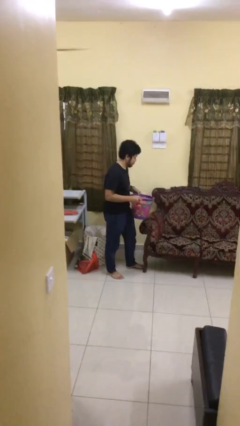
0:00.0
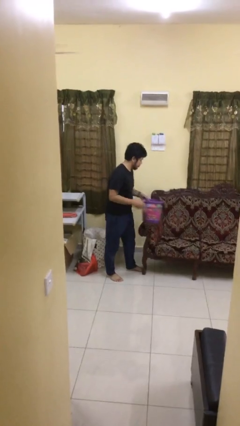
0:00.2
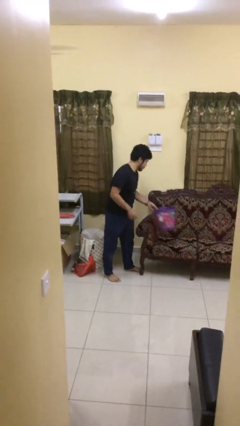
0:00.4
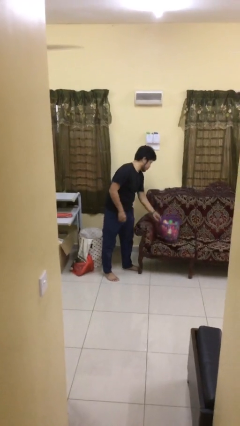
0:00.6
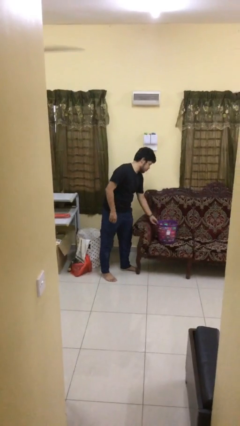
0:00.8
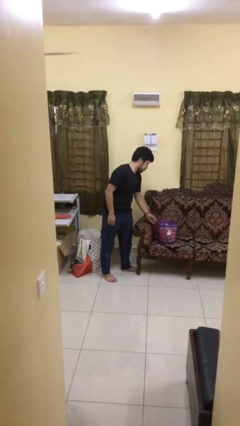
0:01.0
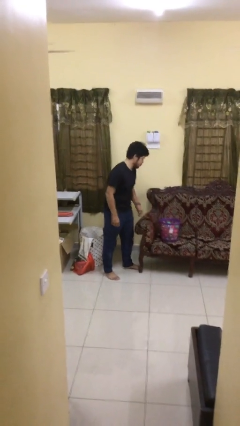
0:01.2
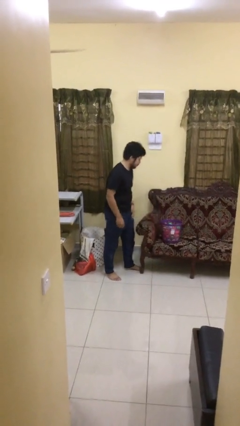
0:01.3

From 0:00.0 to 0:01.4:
person puts down object on couch

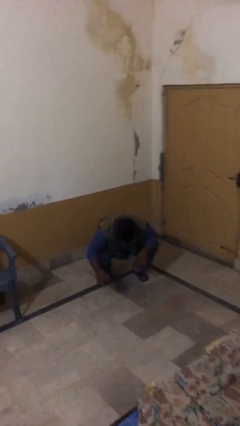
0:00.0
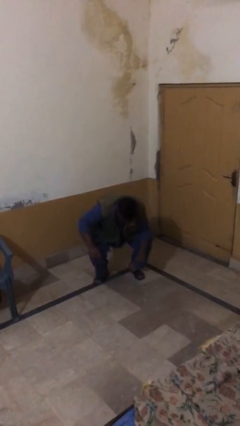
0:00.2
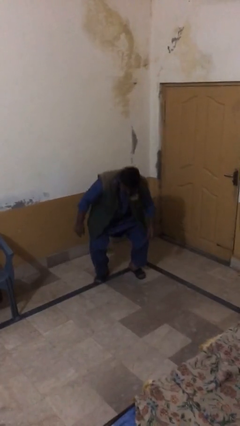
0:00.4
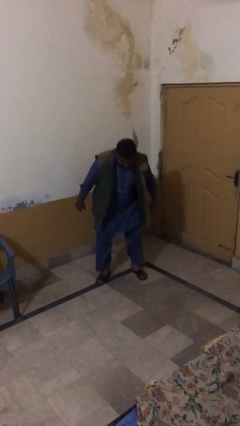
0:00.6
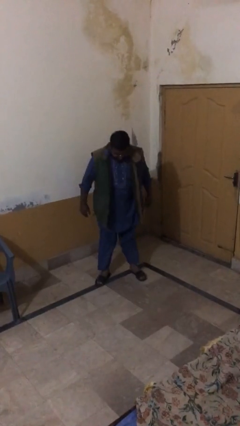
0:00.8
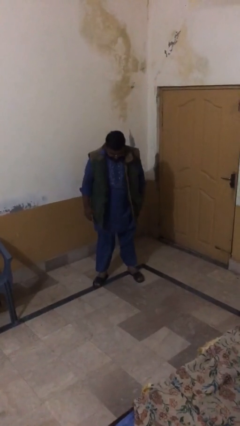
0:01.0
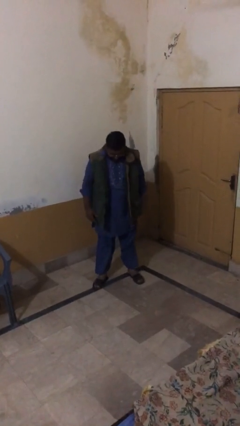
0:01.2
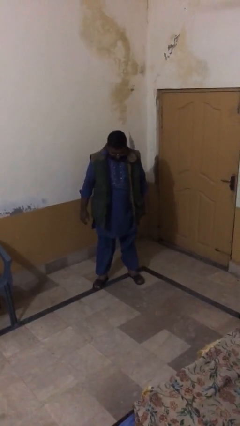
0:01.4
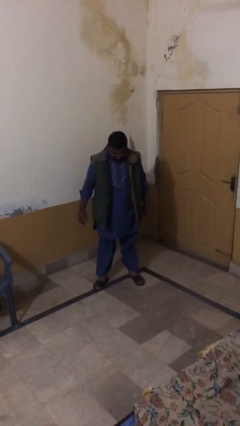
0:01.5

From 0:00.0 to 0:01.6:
person stands up

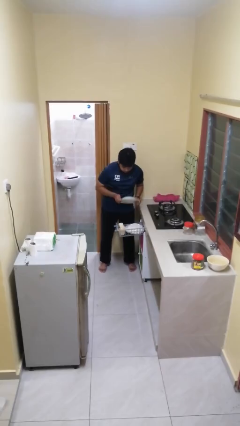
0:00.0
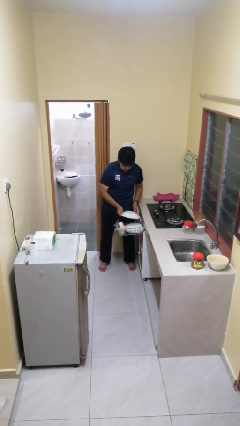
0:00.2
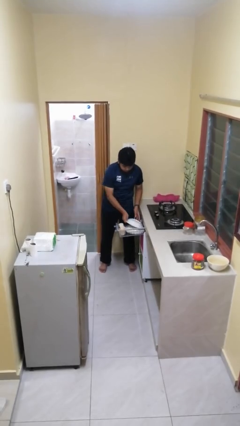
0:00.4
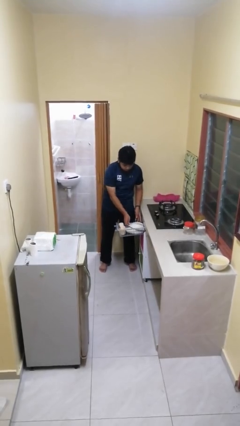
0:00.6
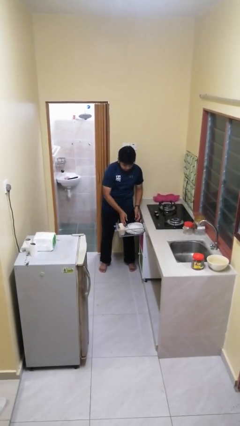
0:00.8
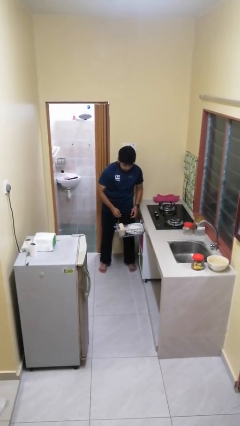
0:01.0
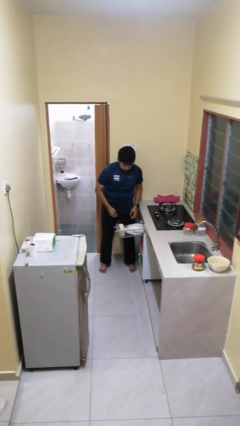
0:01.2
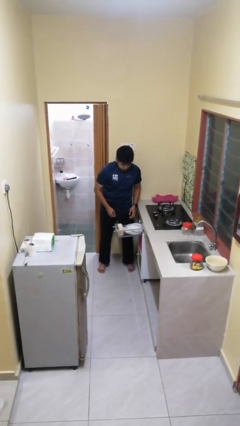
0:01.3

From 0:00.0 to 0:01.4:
person puts object into kitchen drawer

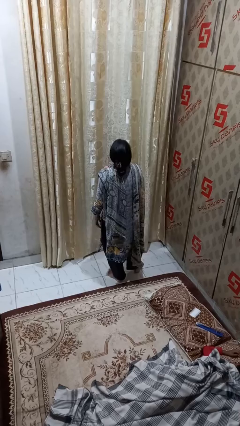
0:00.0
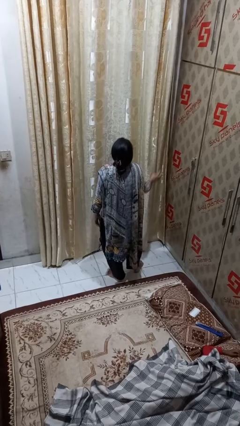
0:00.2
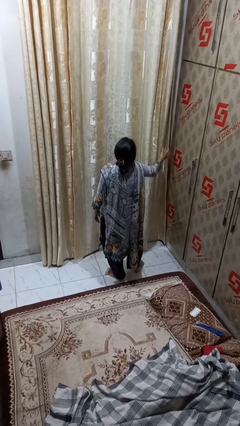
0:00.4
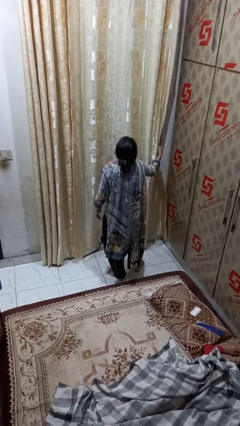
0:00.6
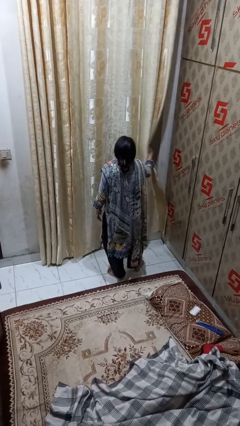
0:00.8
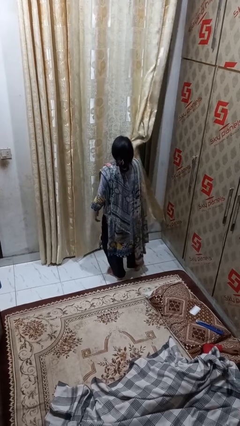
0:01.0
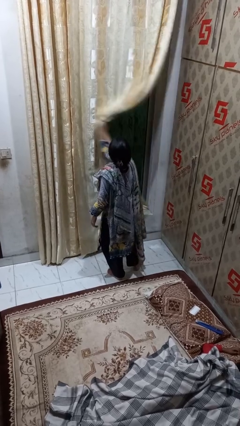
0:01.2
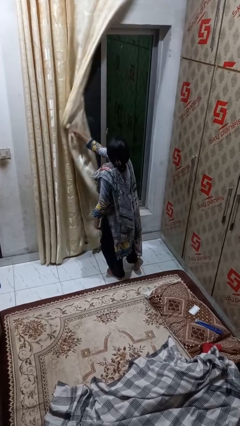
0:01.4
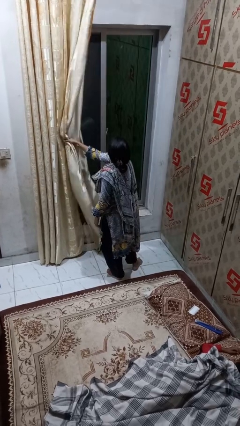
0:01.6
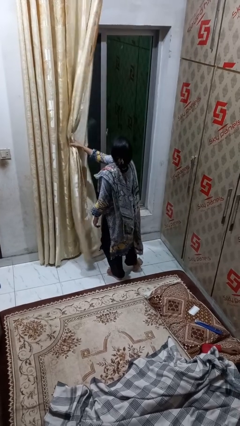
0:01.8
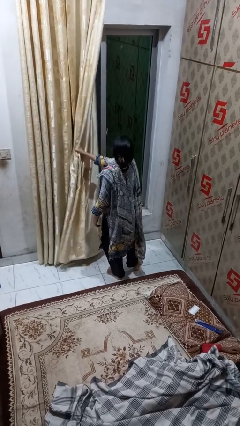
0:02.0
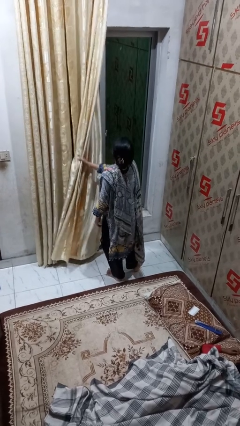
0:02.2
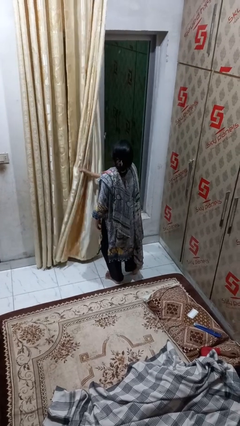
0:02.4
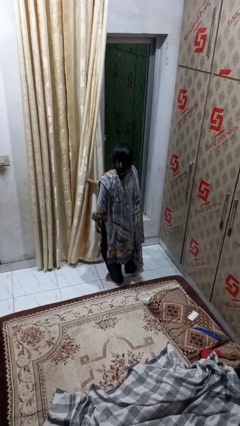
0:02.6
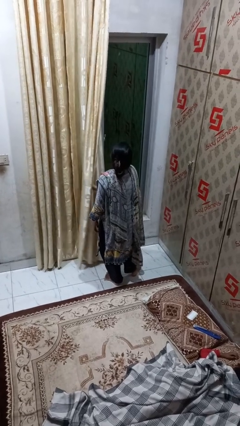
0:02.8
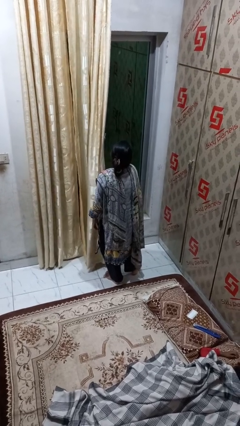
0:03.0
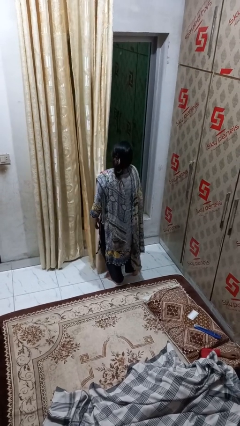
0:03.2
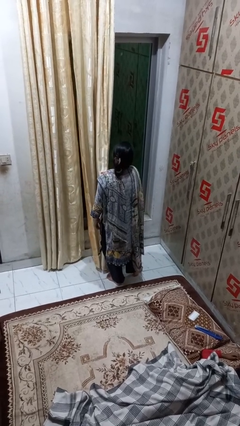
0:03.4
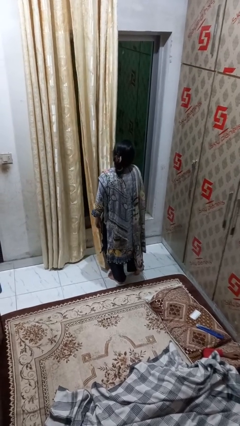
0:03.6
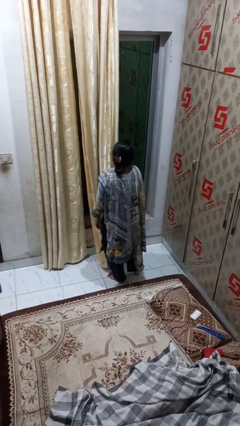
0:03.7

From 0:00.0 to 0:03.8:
person opens curtains

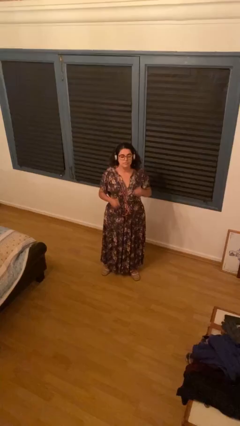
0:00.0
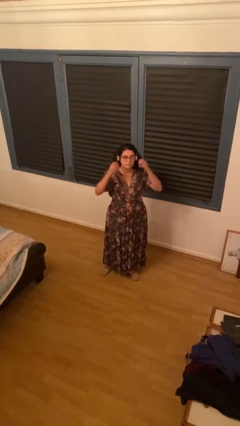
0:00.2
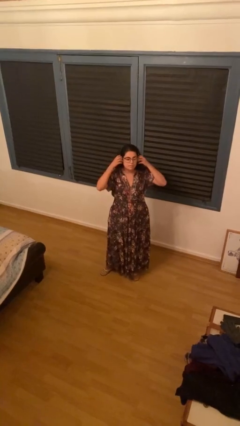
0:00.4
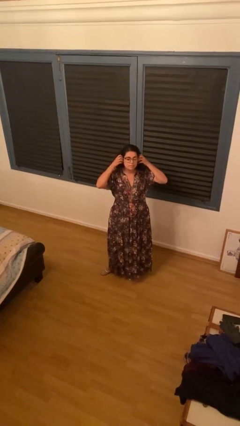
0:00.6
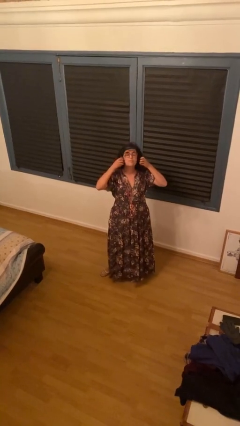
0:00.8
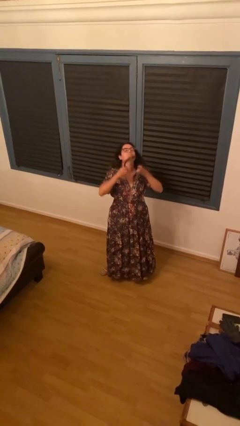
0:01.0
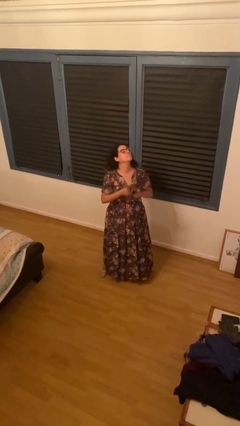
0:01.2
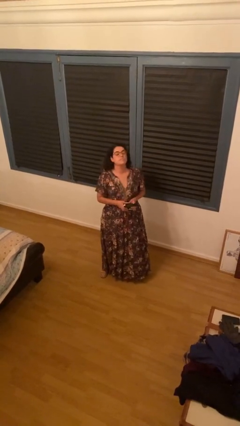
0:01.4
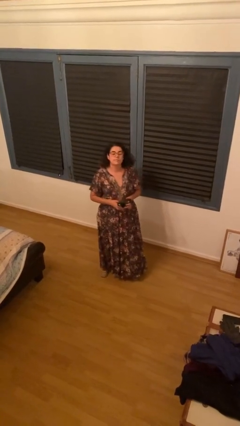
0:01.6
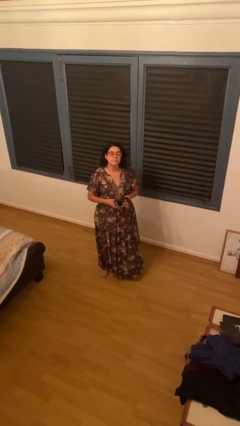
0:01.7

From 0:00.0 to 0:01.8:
person takes off headphones

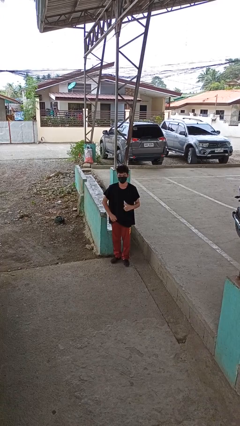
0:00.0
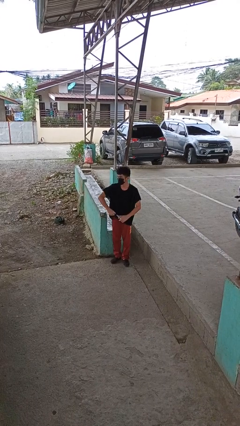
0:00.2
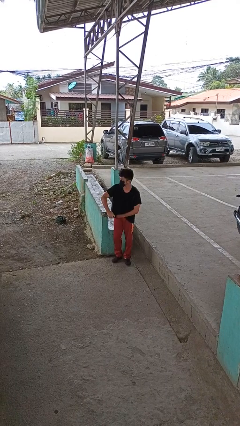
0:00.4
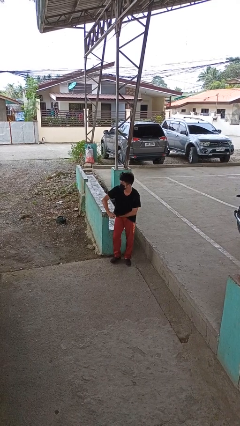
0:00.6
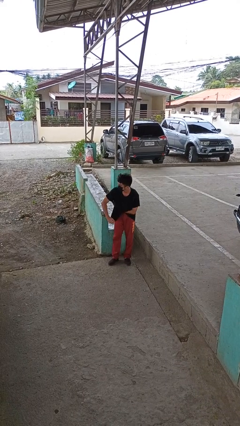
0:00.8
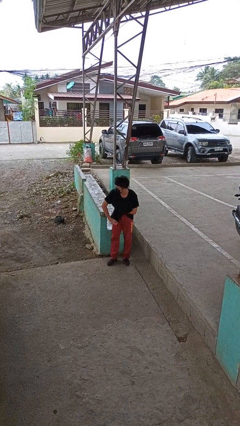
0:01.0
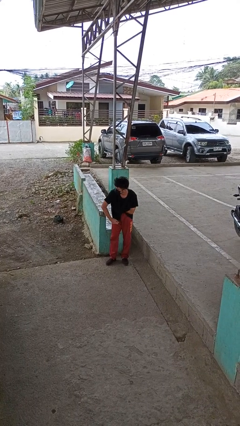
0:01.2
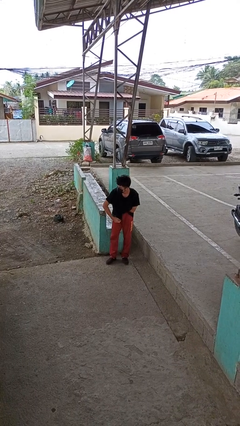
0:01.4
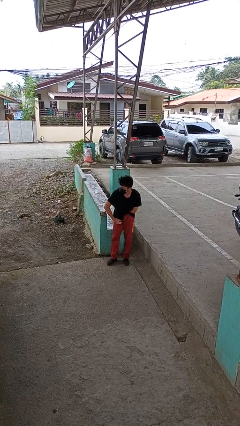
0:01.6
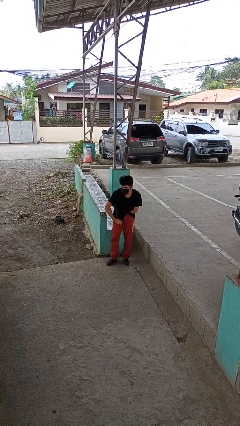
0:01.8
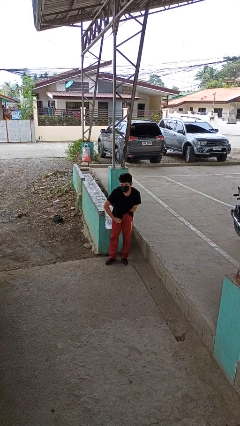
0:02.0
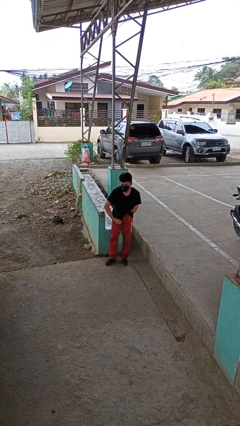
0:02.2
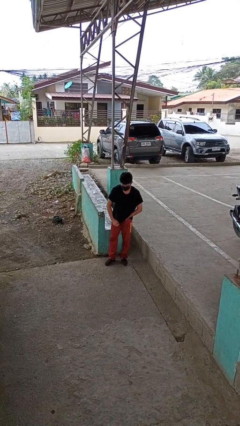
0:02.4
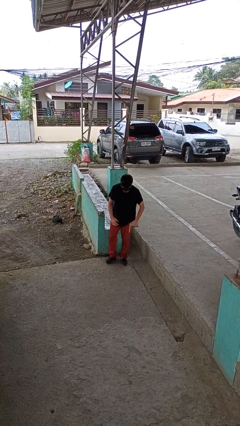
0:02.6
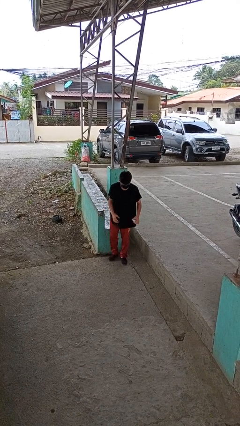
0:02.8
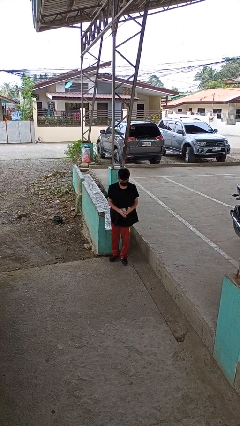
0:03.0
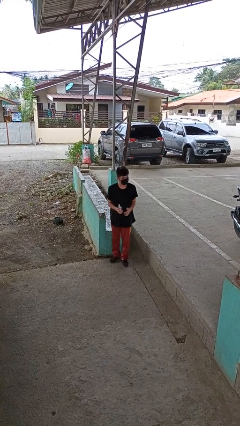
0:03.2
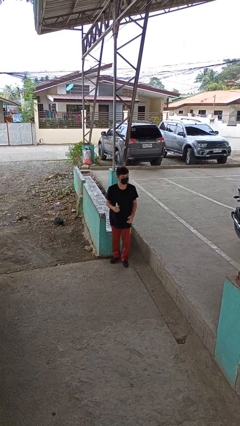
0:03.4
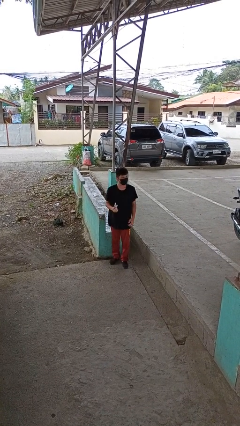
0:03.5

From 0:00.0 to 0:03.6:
person applies deodorant

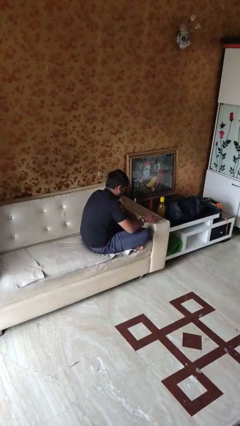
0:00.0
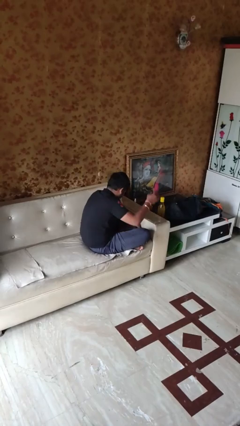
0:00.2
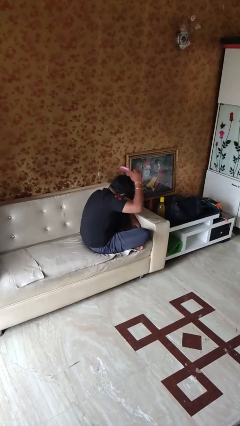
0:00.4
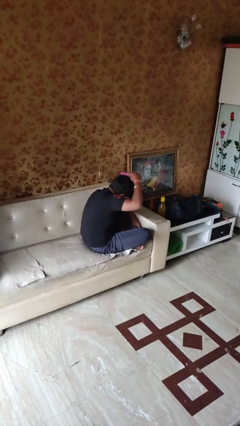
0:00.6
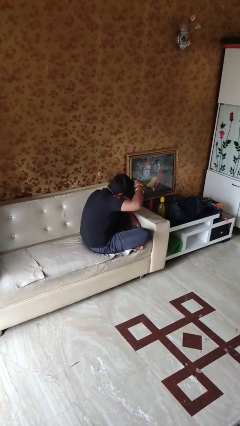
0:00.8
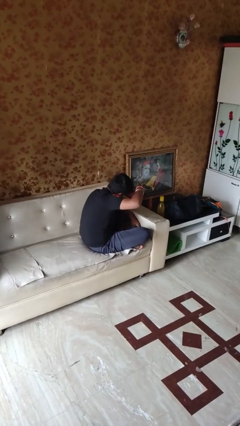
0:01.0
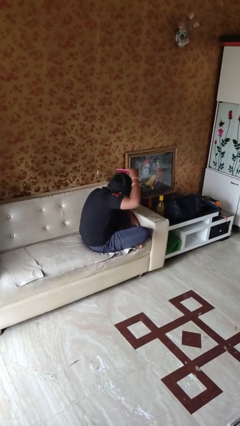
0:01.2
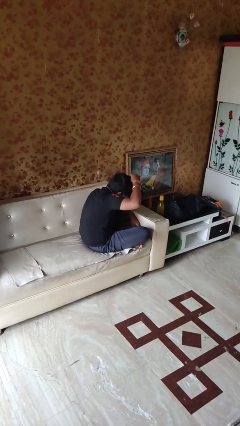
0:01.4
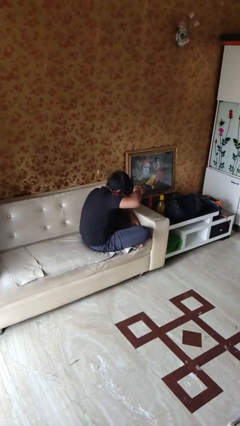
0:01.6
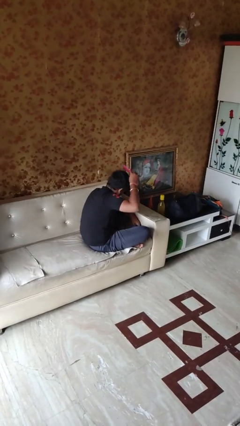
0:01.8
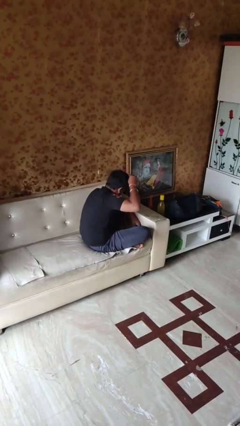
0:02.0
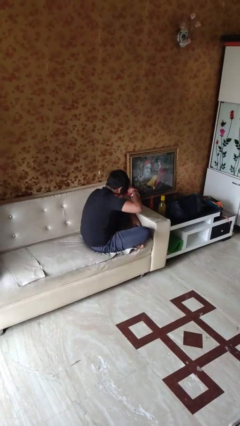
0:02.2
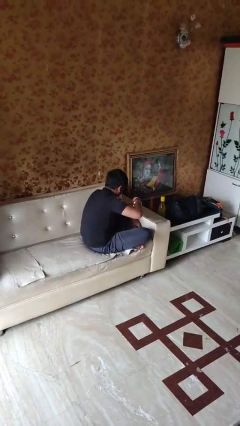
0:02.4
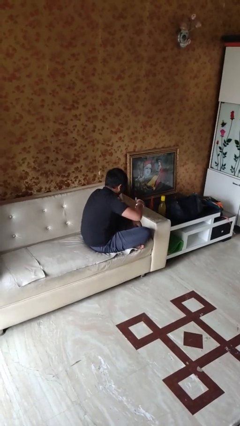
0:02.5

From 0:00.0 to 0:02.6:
person brushes hair

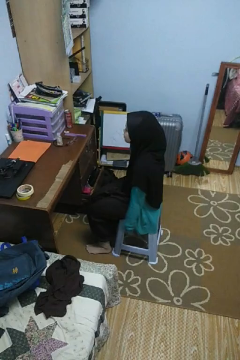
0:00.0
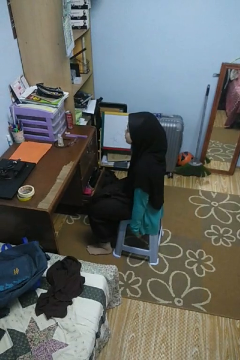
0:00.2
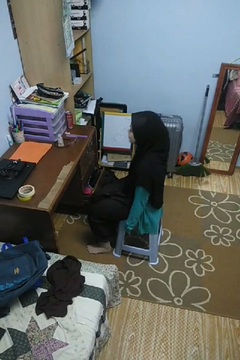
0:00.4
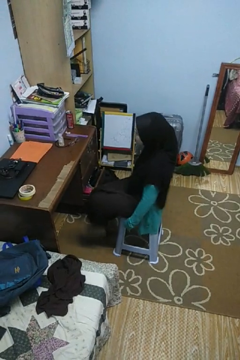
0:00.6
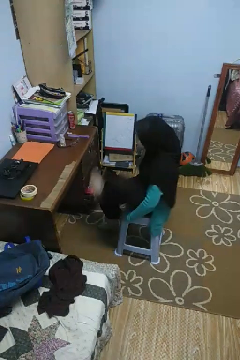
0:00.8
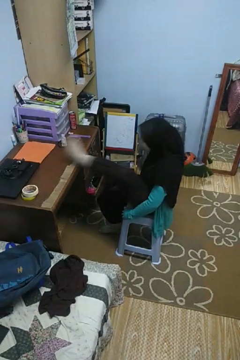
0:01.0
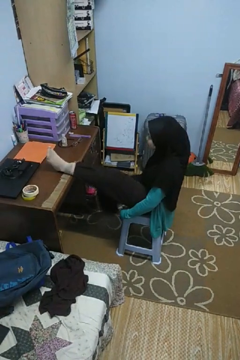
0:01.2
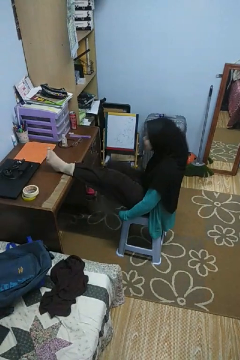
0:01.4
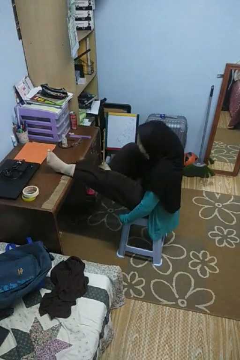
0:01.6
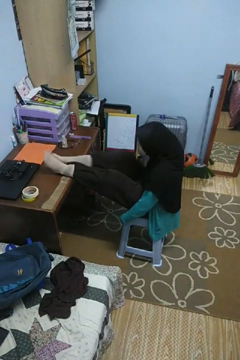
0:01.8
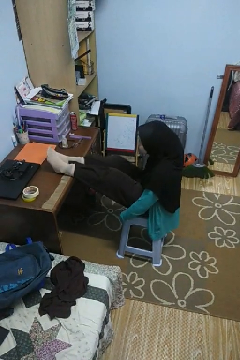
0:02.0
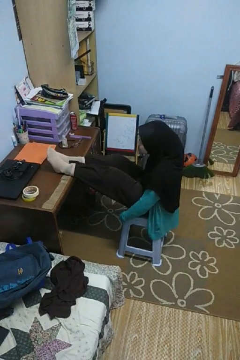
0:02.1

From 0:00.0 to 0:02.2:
person puts feet up
